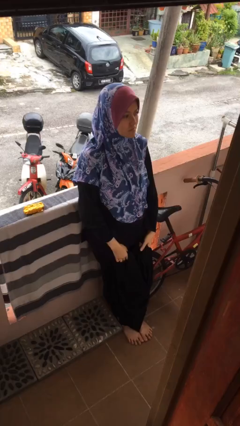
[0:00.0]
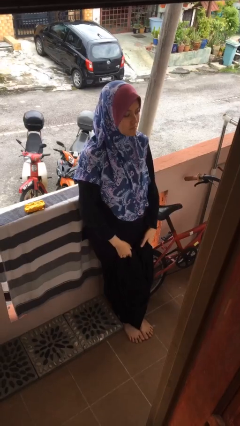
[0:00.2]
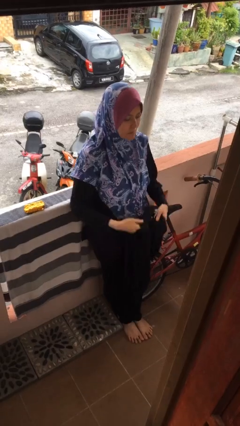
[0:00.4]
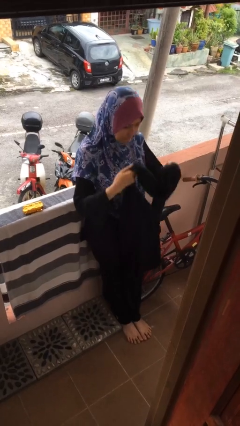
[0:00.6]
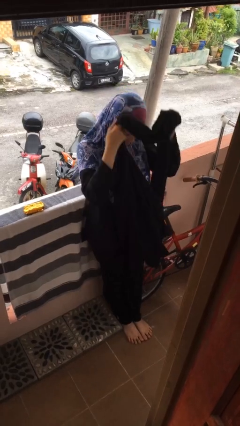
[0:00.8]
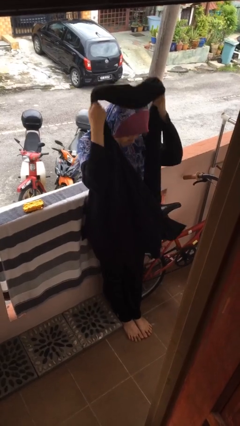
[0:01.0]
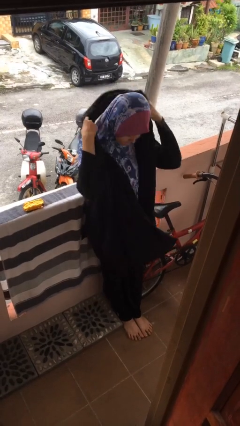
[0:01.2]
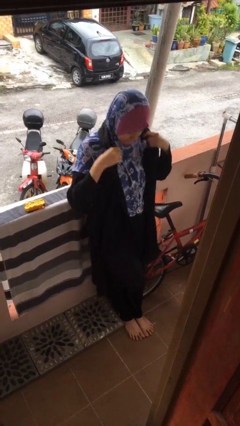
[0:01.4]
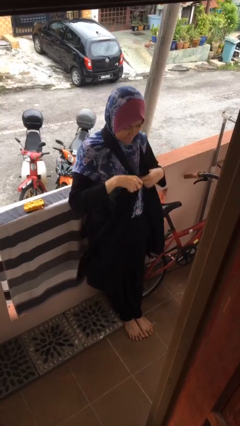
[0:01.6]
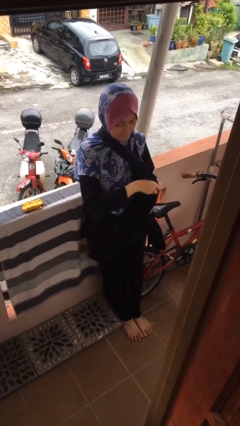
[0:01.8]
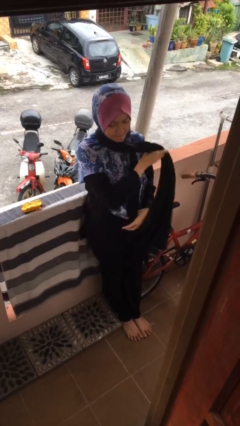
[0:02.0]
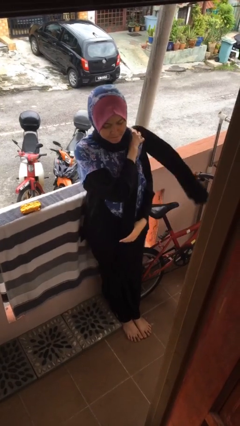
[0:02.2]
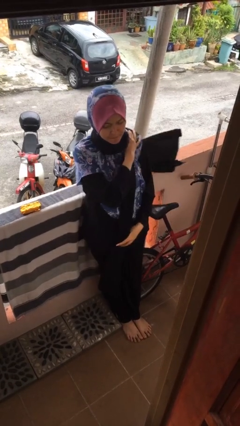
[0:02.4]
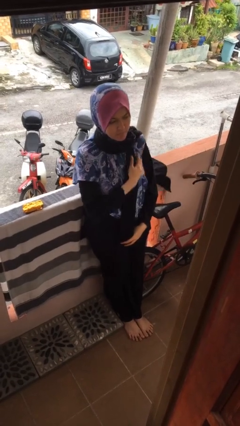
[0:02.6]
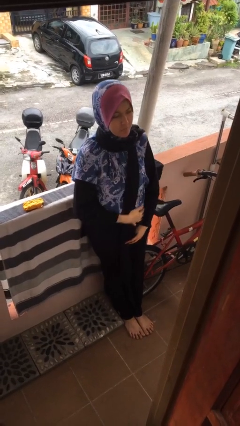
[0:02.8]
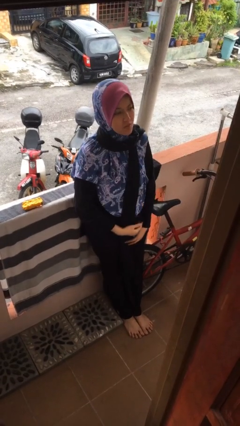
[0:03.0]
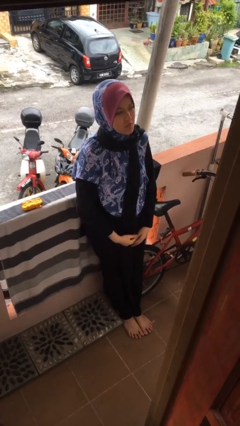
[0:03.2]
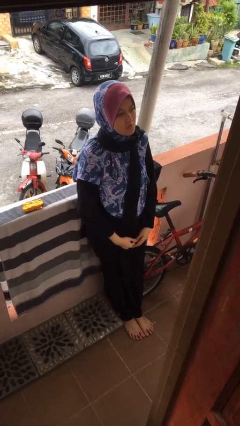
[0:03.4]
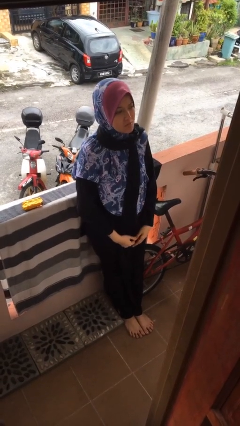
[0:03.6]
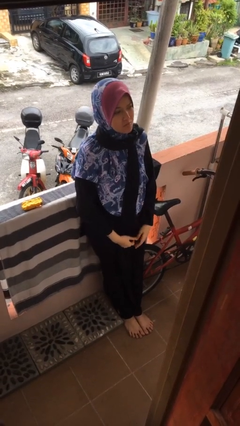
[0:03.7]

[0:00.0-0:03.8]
person puts on scarf

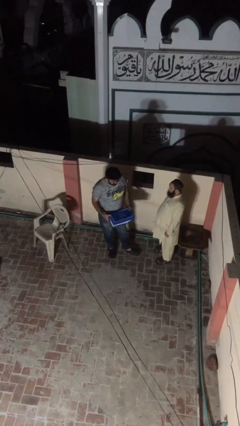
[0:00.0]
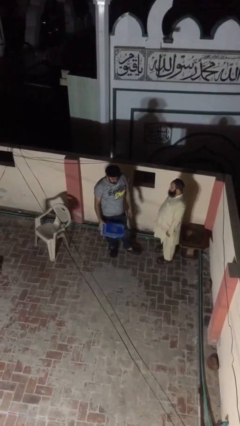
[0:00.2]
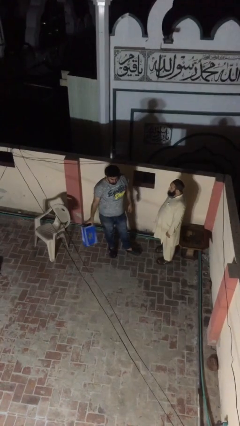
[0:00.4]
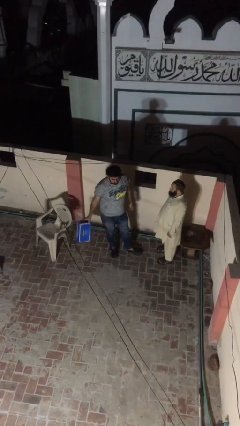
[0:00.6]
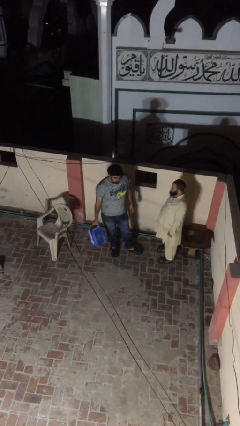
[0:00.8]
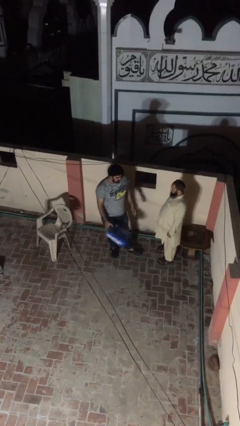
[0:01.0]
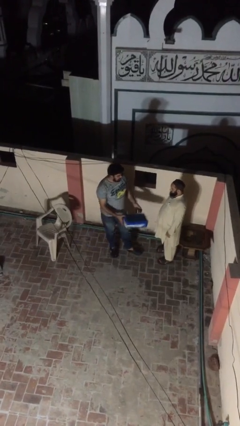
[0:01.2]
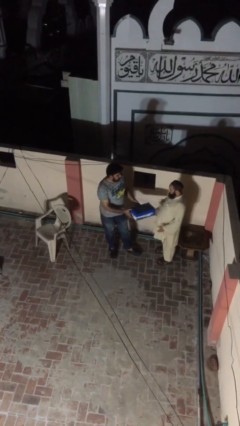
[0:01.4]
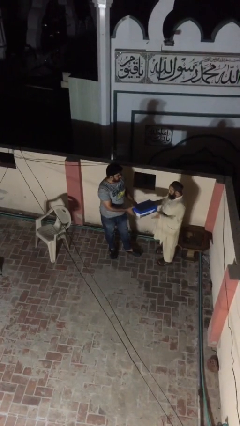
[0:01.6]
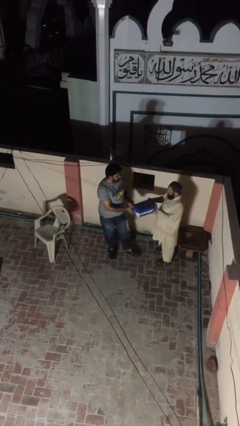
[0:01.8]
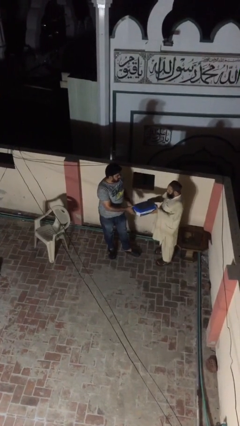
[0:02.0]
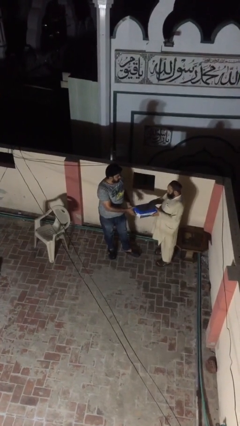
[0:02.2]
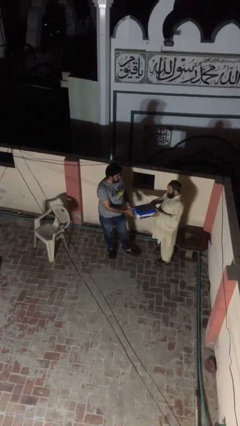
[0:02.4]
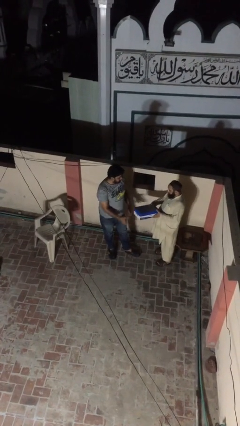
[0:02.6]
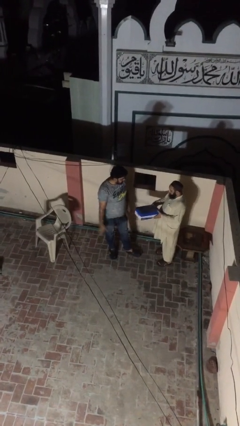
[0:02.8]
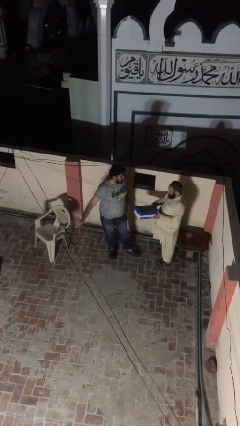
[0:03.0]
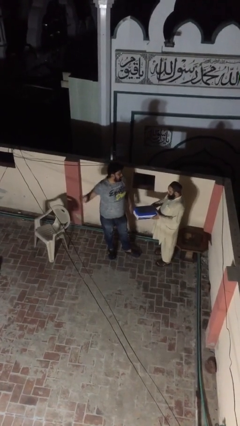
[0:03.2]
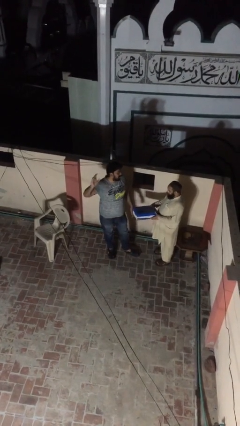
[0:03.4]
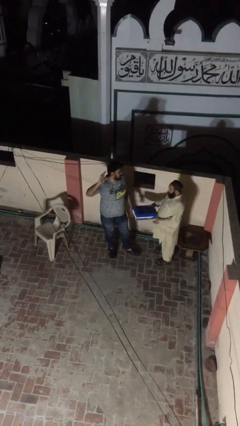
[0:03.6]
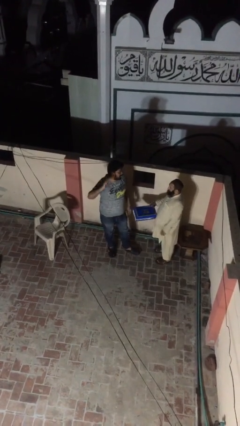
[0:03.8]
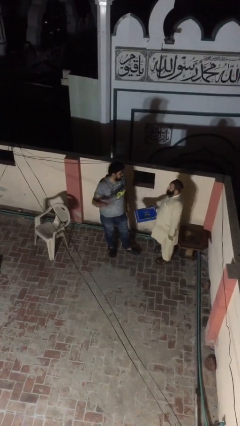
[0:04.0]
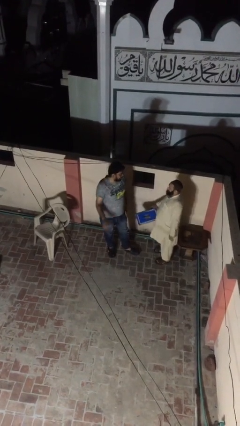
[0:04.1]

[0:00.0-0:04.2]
person transfers object to person

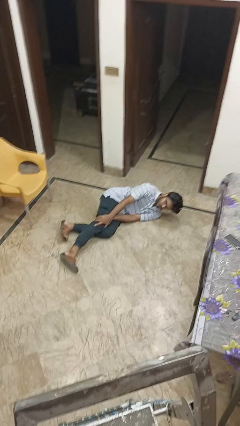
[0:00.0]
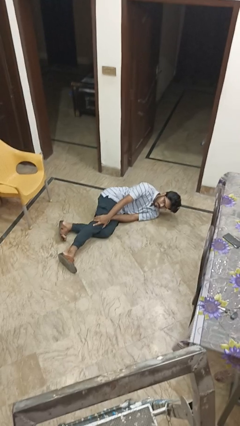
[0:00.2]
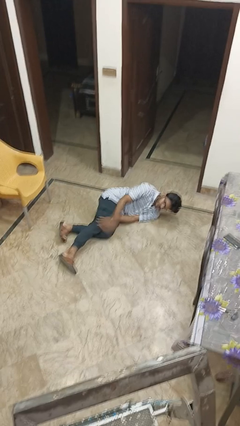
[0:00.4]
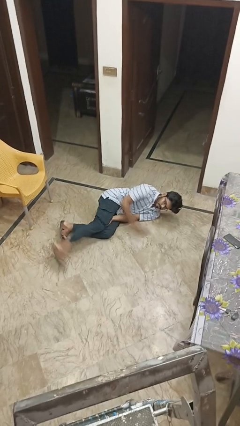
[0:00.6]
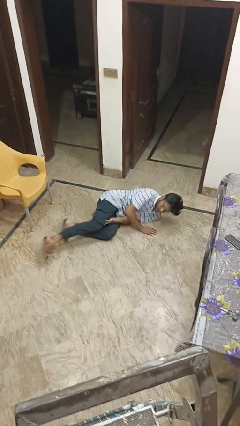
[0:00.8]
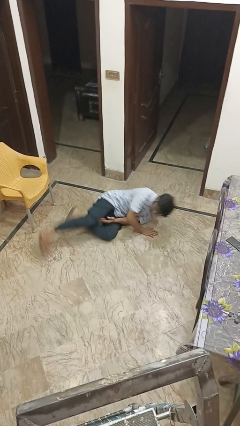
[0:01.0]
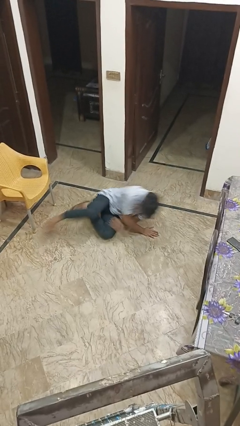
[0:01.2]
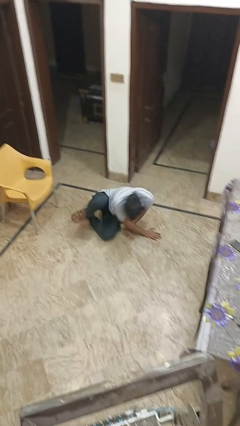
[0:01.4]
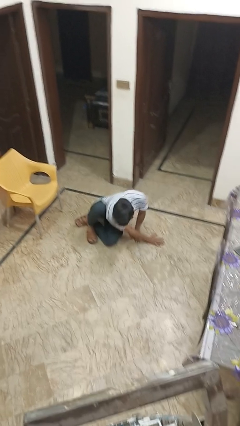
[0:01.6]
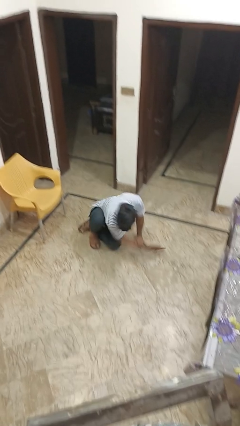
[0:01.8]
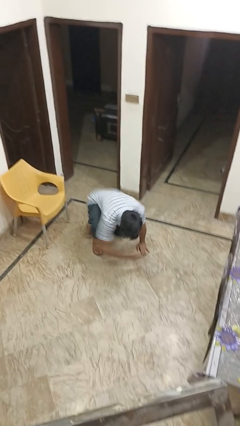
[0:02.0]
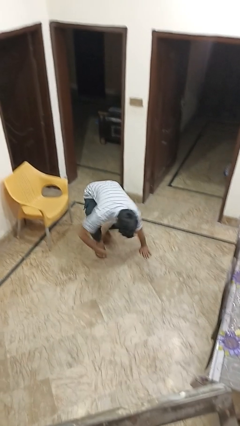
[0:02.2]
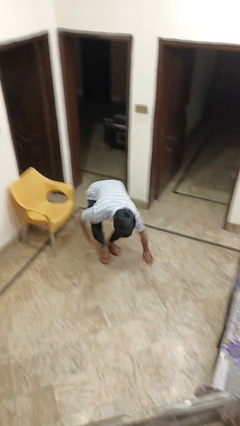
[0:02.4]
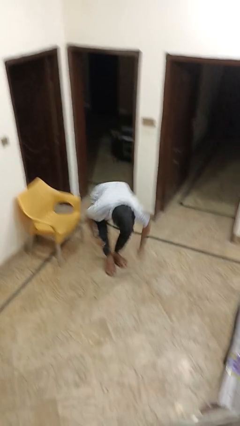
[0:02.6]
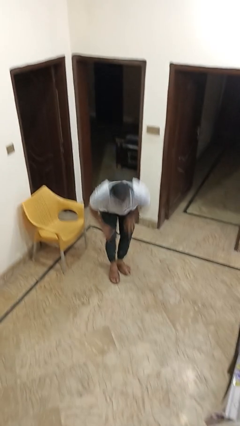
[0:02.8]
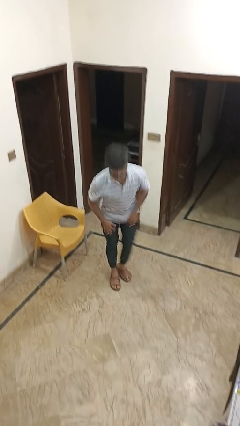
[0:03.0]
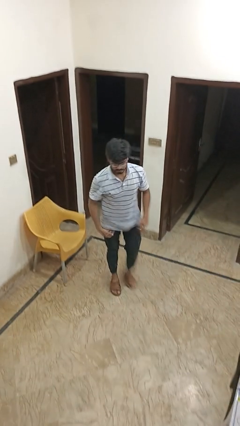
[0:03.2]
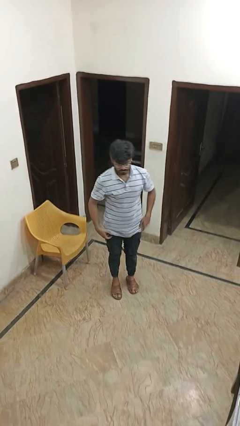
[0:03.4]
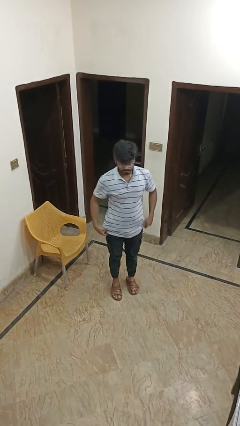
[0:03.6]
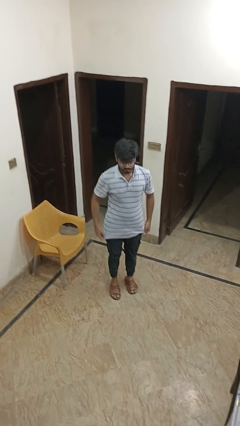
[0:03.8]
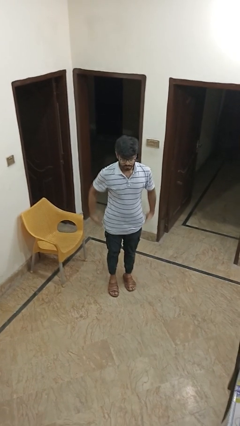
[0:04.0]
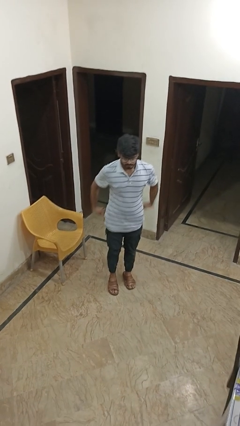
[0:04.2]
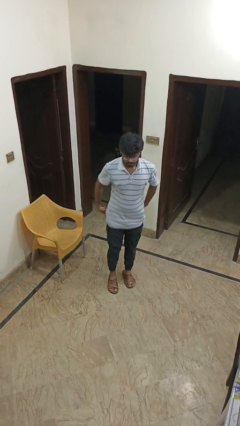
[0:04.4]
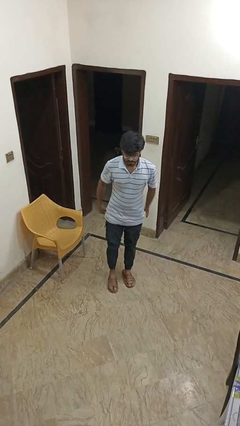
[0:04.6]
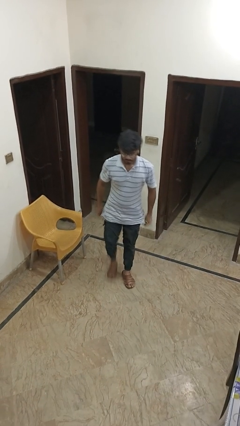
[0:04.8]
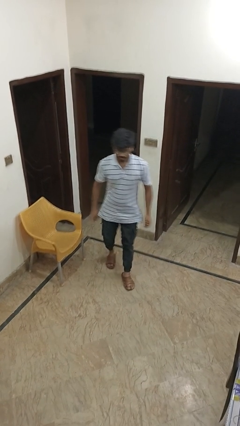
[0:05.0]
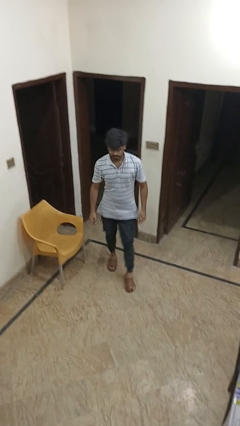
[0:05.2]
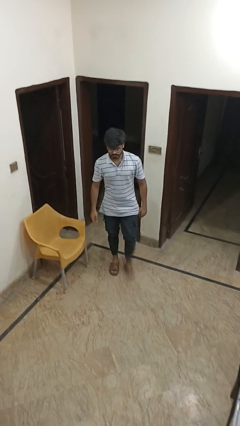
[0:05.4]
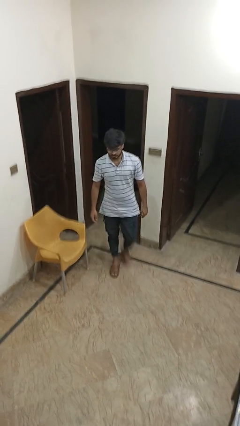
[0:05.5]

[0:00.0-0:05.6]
person stands up from floor

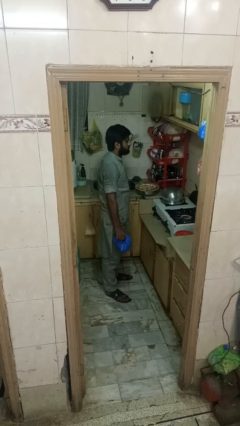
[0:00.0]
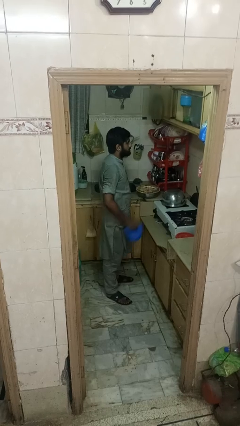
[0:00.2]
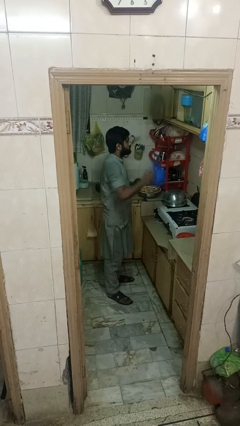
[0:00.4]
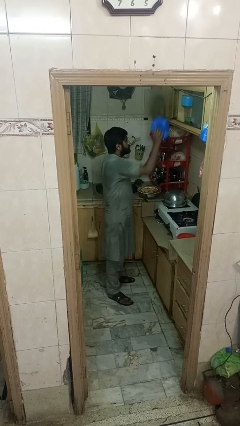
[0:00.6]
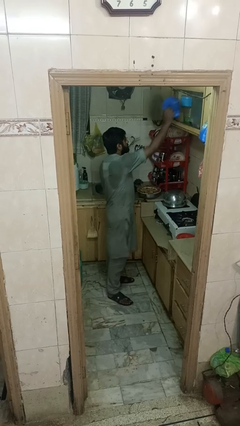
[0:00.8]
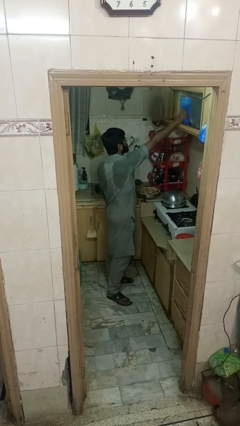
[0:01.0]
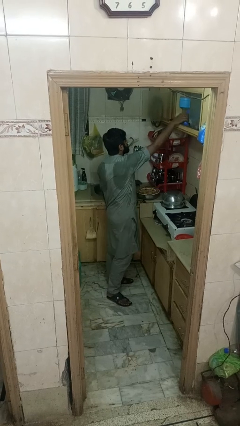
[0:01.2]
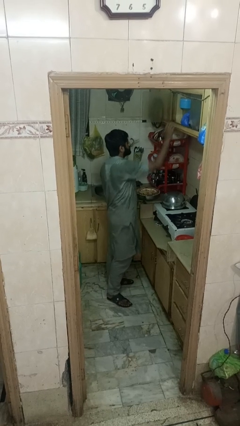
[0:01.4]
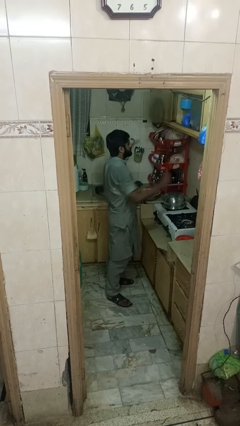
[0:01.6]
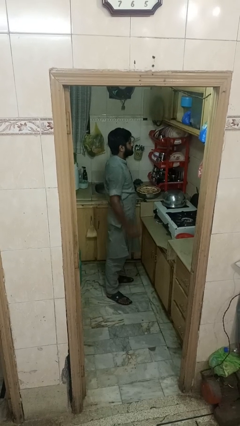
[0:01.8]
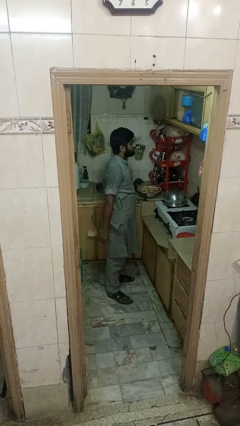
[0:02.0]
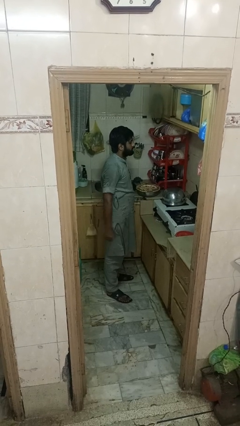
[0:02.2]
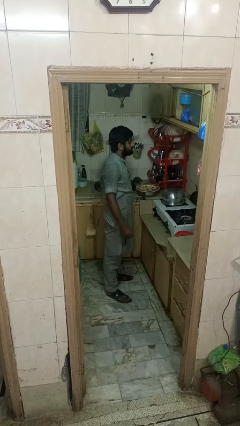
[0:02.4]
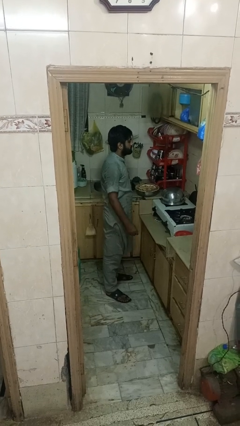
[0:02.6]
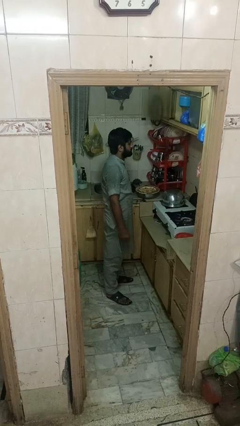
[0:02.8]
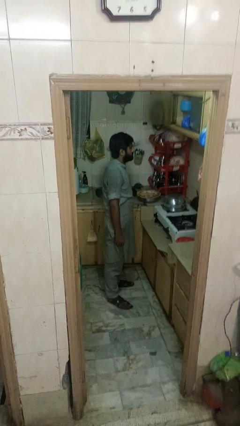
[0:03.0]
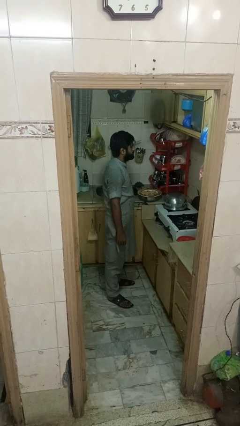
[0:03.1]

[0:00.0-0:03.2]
person loads groceries into cabinet

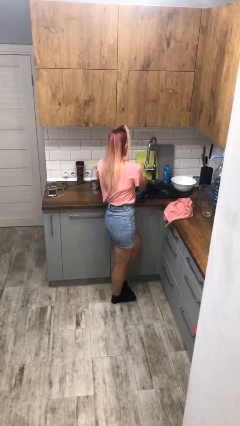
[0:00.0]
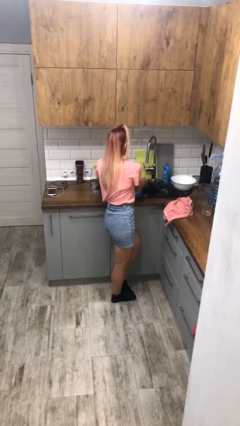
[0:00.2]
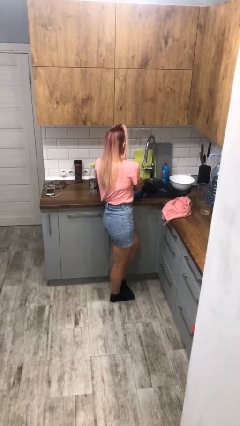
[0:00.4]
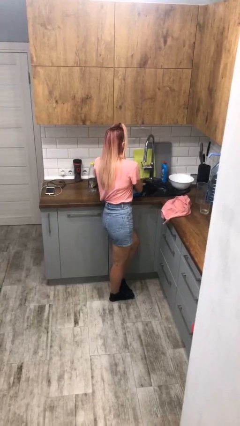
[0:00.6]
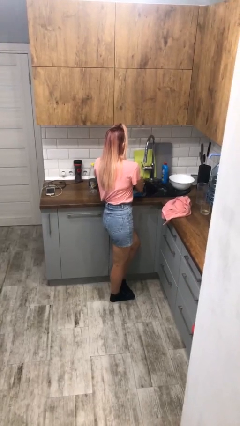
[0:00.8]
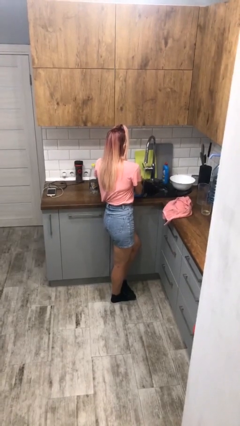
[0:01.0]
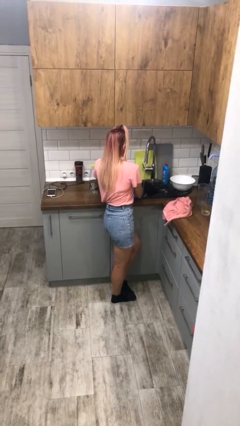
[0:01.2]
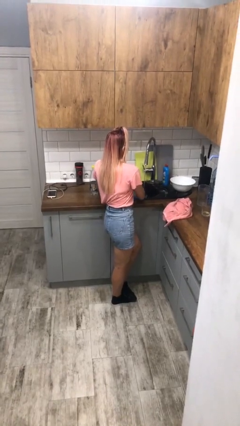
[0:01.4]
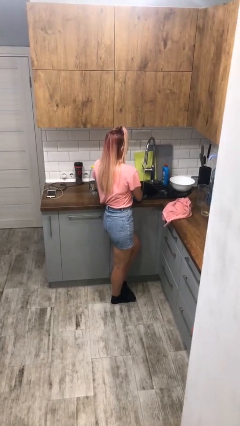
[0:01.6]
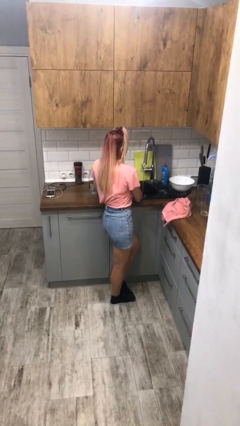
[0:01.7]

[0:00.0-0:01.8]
person washes hands
